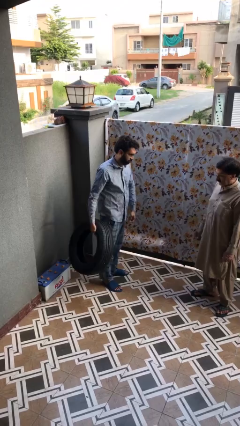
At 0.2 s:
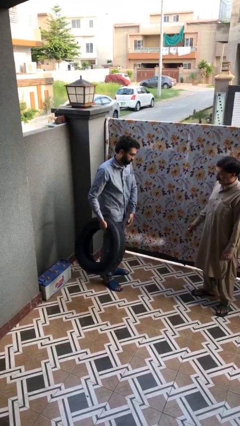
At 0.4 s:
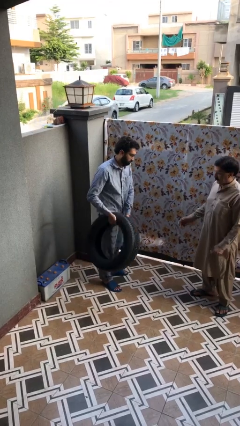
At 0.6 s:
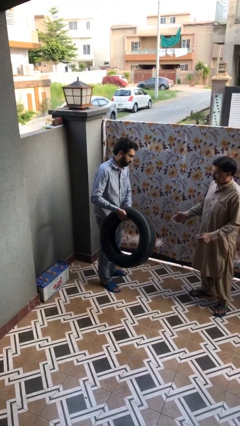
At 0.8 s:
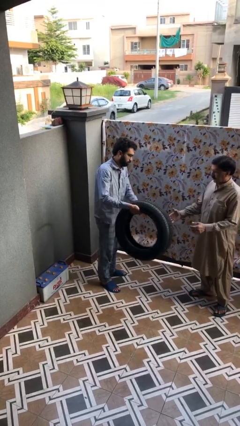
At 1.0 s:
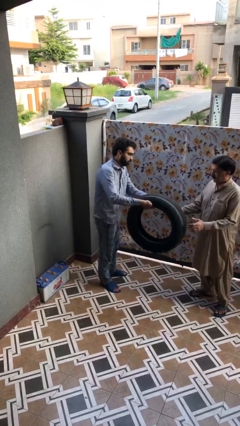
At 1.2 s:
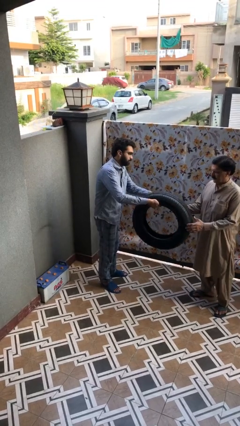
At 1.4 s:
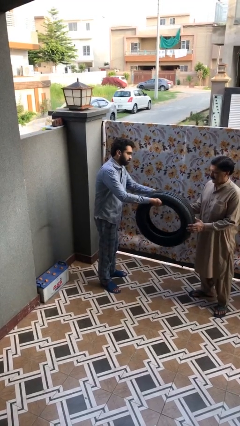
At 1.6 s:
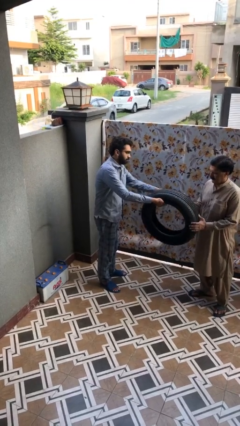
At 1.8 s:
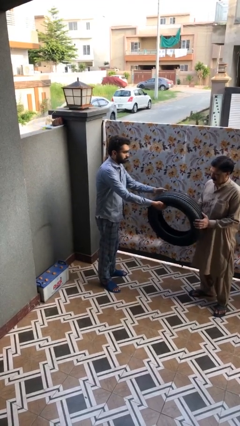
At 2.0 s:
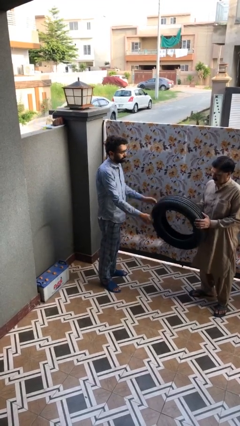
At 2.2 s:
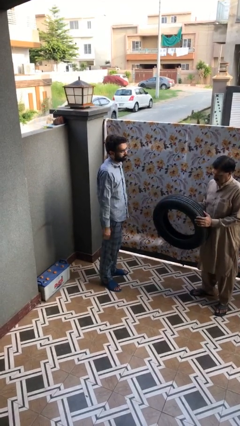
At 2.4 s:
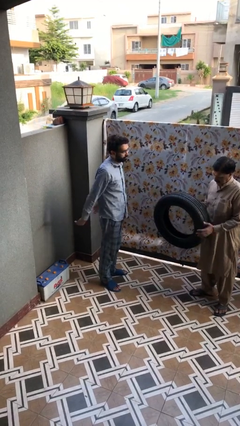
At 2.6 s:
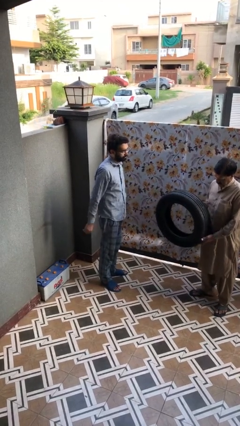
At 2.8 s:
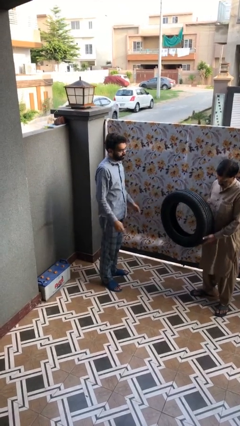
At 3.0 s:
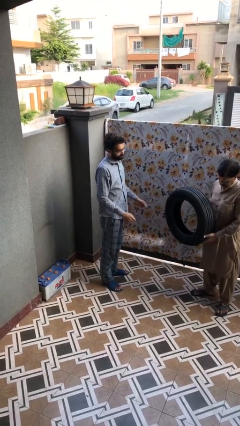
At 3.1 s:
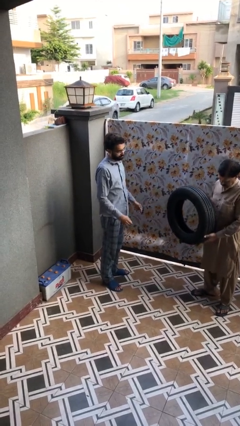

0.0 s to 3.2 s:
person transfers object to person

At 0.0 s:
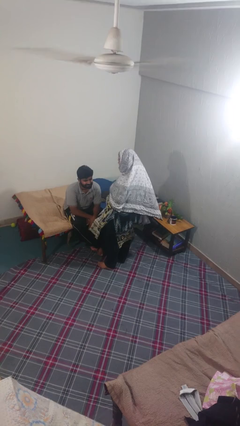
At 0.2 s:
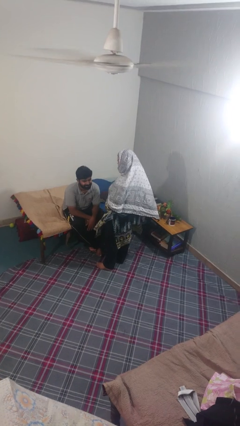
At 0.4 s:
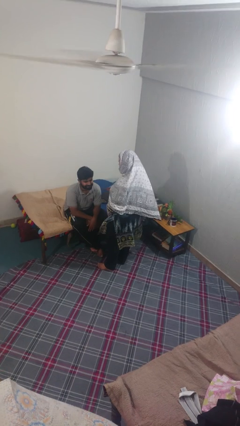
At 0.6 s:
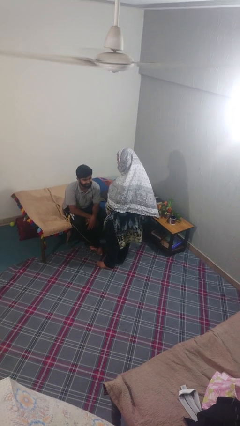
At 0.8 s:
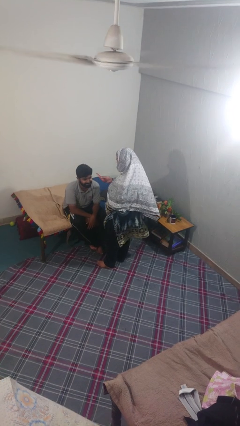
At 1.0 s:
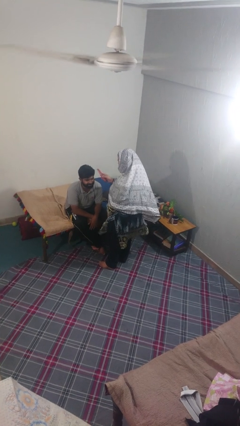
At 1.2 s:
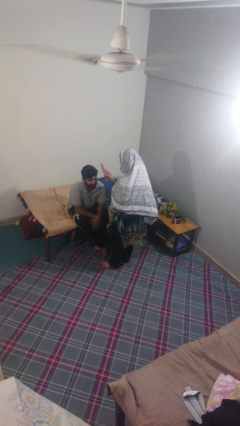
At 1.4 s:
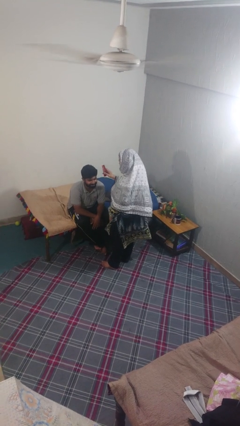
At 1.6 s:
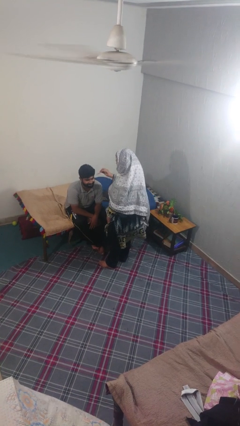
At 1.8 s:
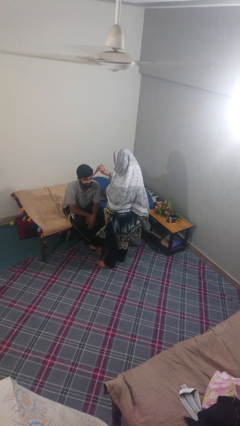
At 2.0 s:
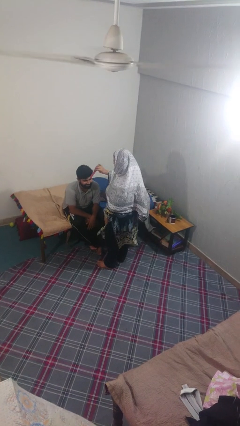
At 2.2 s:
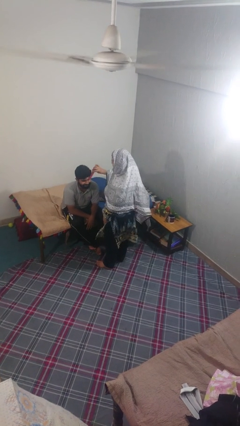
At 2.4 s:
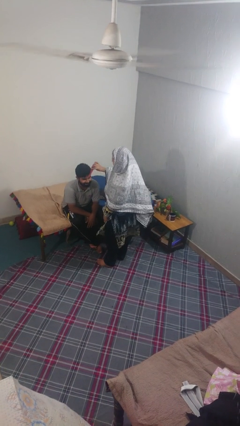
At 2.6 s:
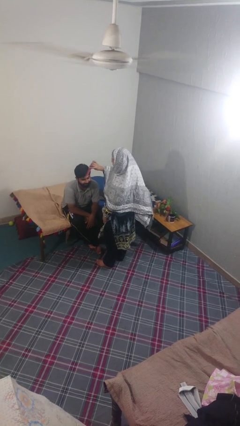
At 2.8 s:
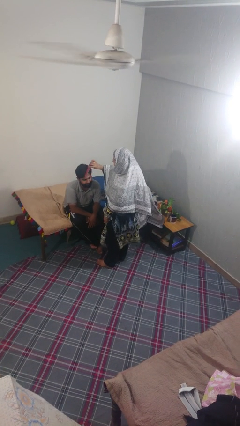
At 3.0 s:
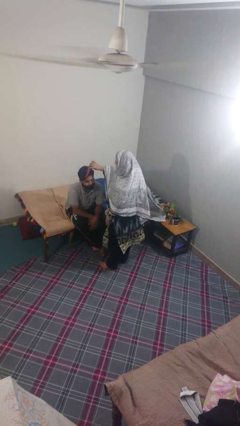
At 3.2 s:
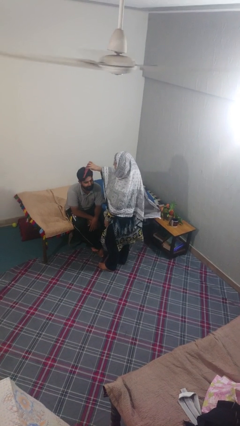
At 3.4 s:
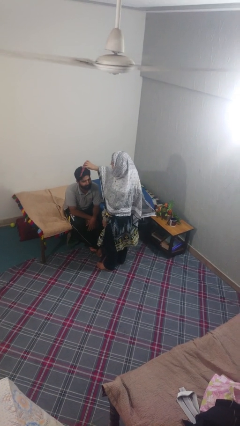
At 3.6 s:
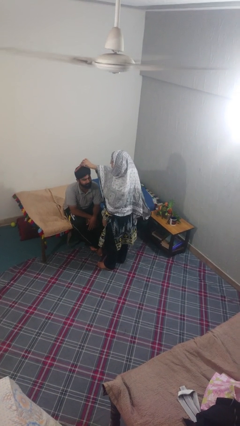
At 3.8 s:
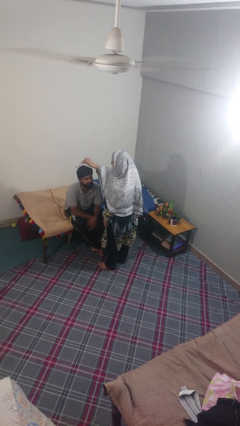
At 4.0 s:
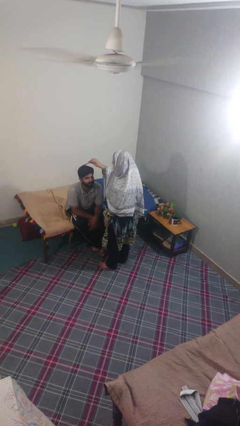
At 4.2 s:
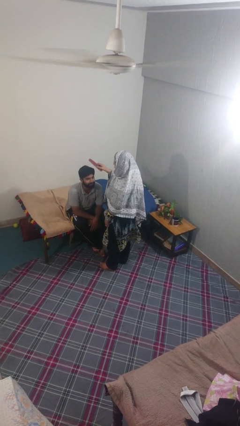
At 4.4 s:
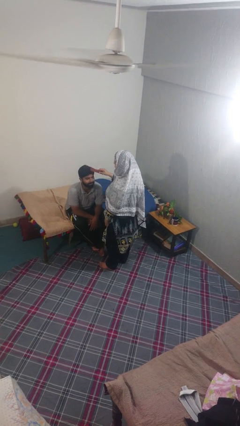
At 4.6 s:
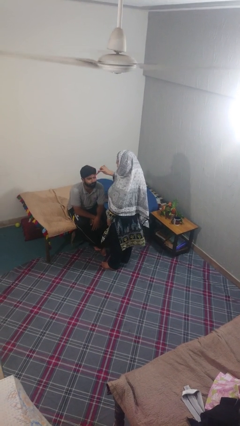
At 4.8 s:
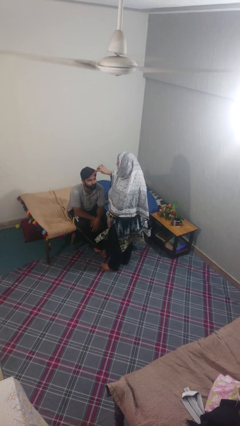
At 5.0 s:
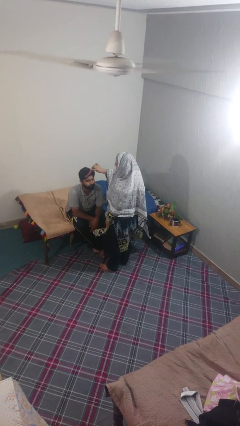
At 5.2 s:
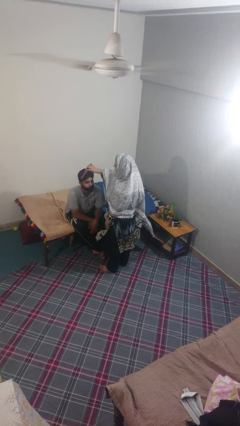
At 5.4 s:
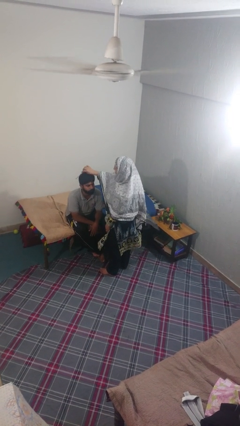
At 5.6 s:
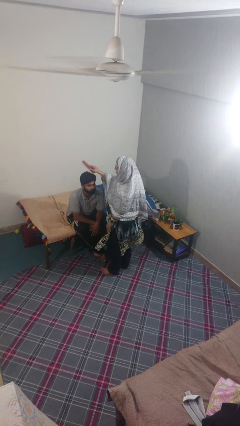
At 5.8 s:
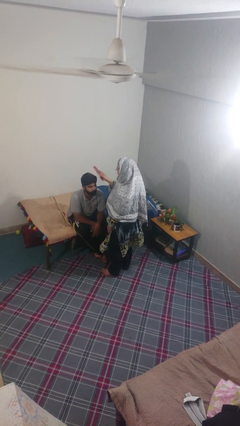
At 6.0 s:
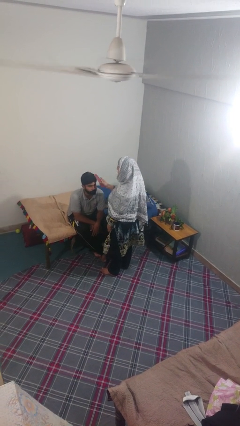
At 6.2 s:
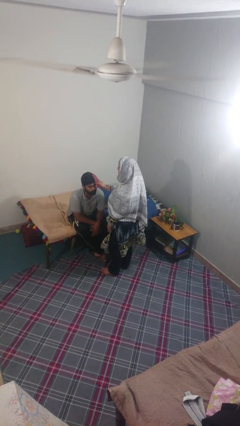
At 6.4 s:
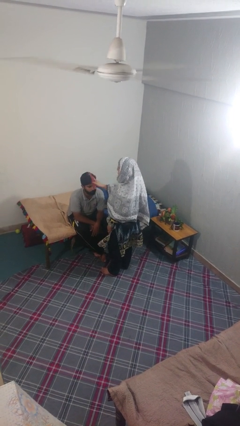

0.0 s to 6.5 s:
person brushes hair of person

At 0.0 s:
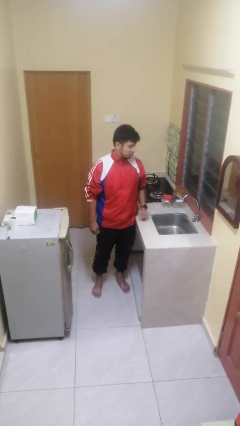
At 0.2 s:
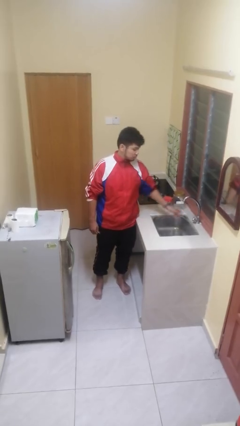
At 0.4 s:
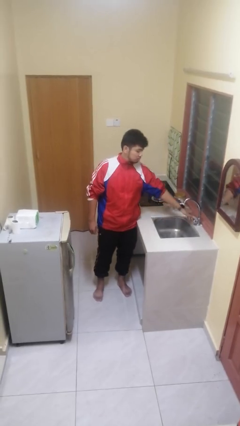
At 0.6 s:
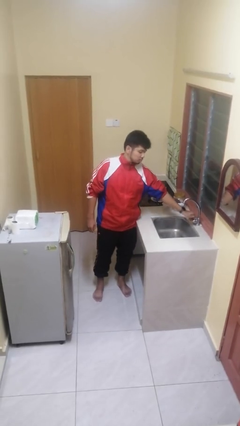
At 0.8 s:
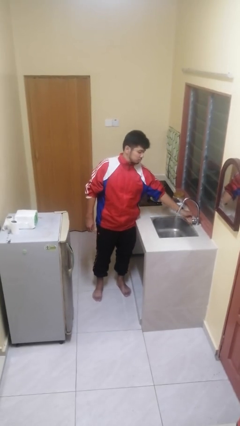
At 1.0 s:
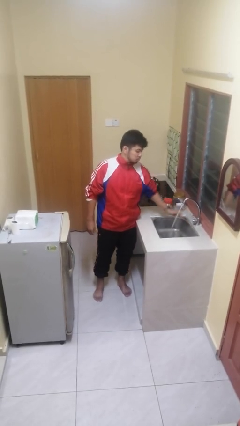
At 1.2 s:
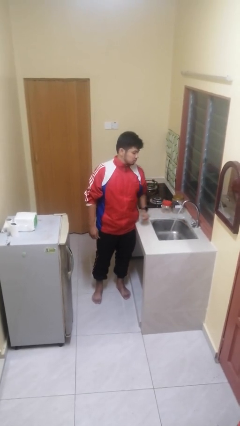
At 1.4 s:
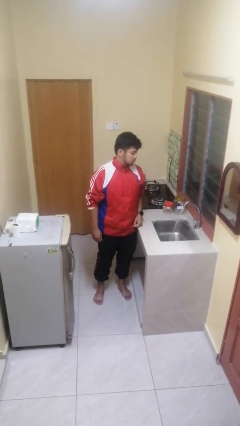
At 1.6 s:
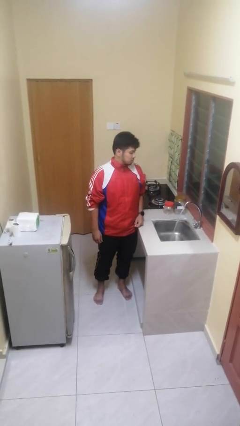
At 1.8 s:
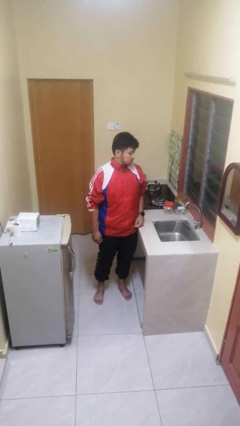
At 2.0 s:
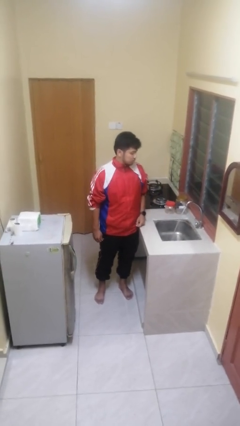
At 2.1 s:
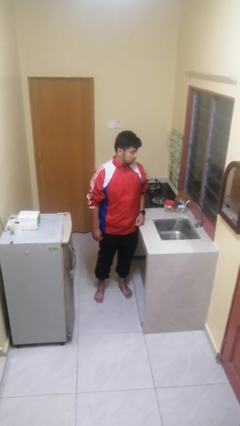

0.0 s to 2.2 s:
person turns on faucet

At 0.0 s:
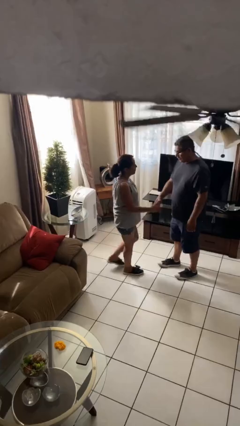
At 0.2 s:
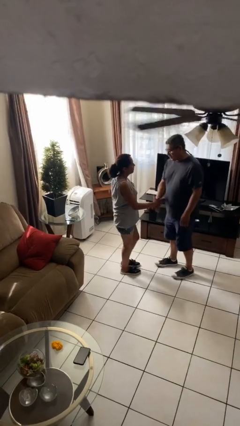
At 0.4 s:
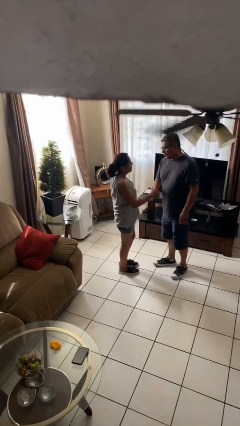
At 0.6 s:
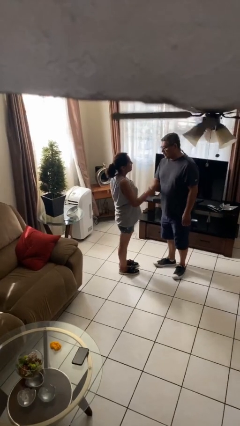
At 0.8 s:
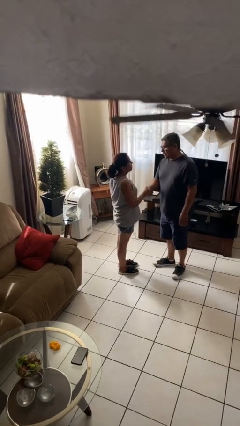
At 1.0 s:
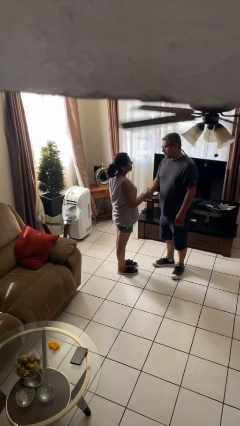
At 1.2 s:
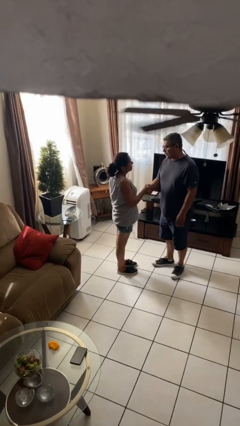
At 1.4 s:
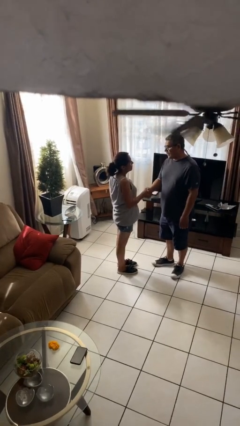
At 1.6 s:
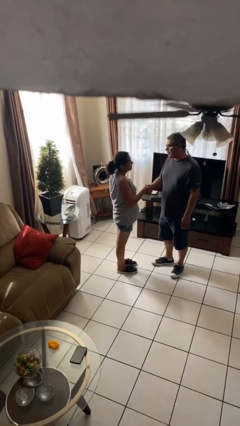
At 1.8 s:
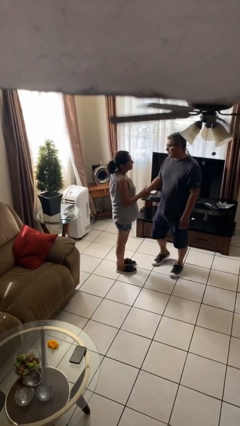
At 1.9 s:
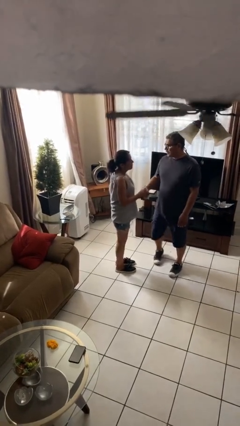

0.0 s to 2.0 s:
person shakes hand

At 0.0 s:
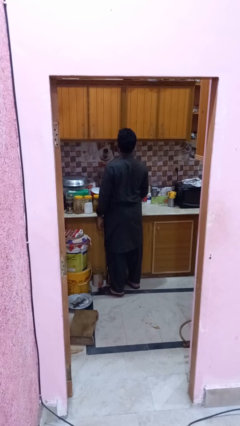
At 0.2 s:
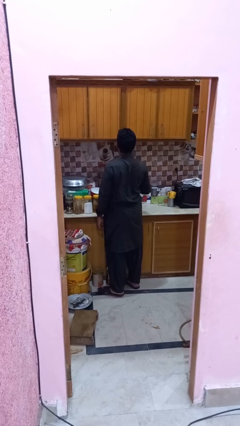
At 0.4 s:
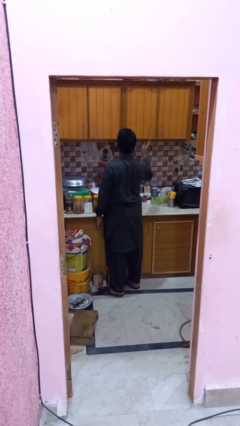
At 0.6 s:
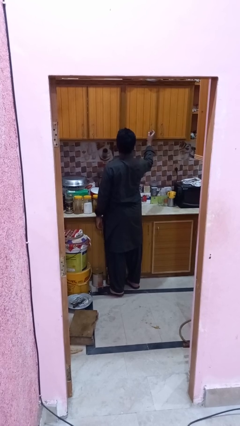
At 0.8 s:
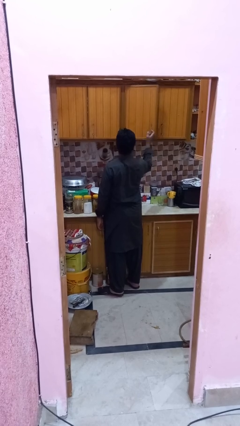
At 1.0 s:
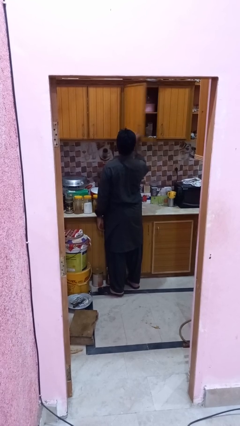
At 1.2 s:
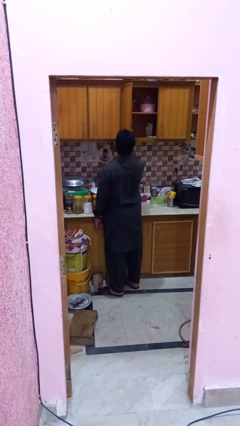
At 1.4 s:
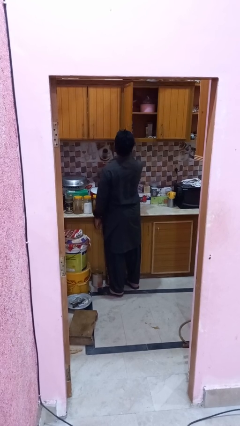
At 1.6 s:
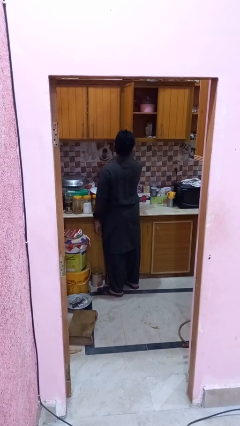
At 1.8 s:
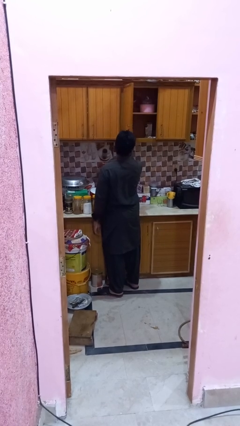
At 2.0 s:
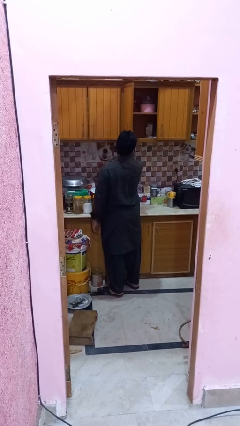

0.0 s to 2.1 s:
person opens cabinet

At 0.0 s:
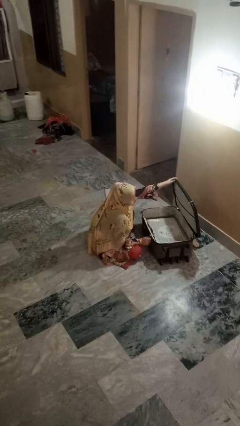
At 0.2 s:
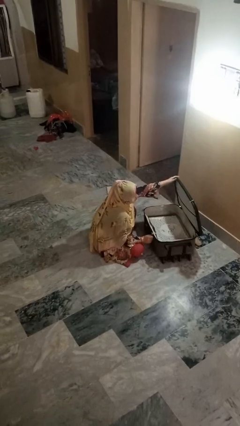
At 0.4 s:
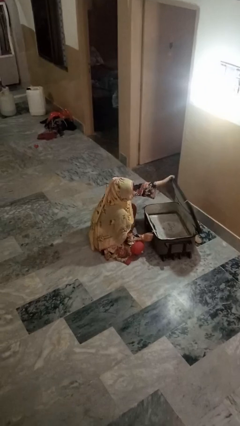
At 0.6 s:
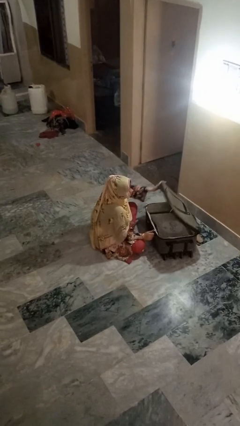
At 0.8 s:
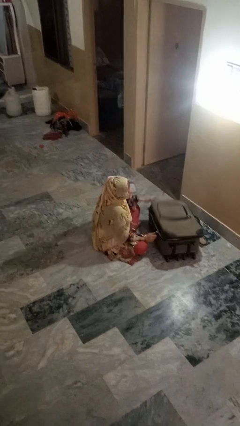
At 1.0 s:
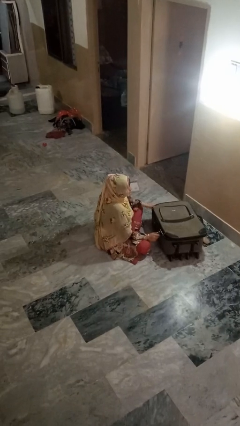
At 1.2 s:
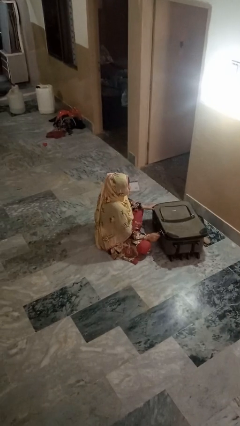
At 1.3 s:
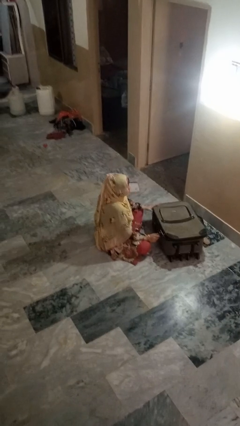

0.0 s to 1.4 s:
person closes suitcase

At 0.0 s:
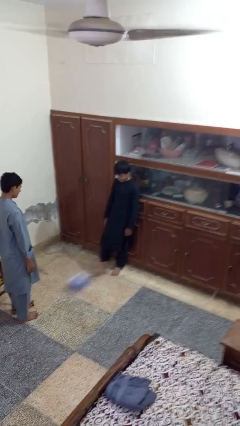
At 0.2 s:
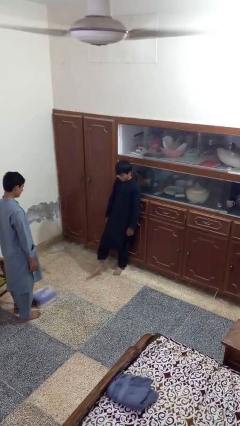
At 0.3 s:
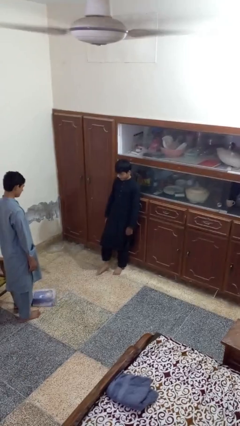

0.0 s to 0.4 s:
person kicks object to person
